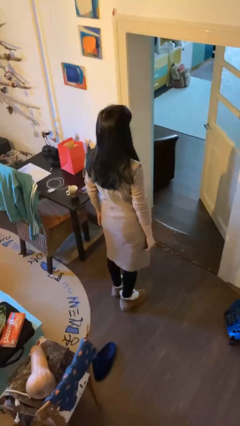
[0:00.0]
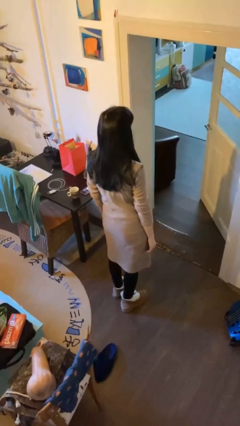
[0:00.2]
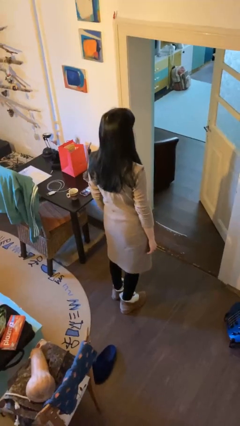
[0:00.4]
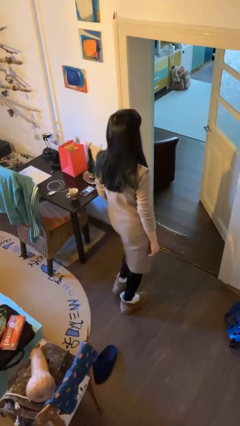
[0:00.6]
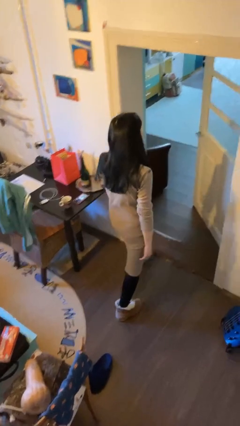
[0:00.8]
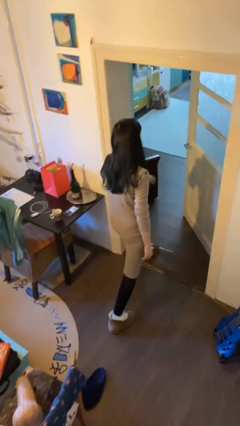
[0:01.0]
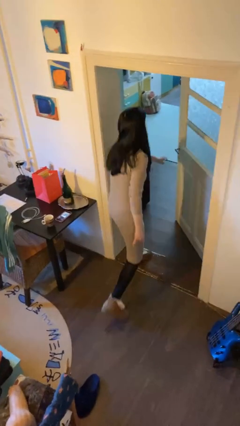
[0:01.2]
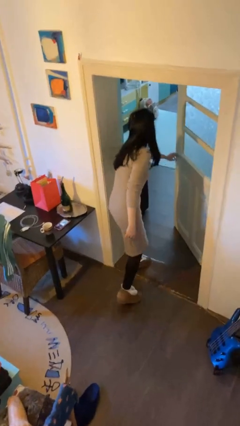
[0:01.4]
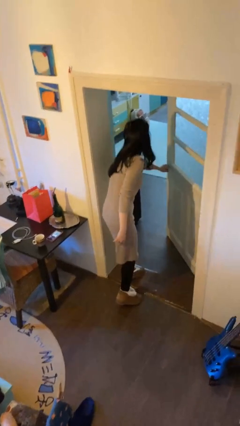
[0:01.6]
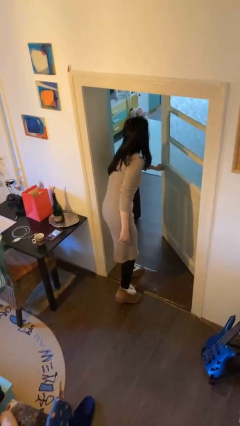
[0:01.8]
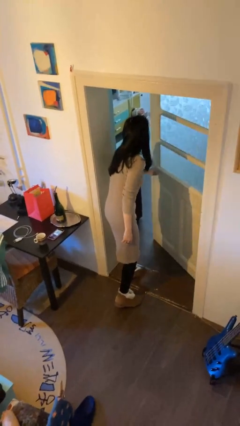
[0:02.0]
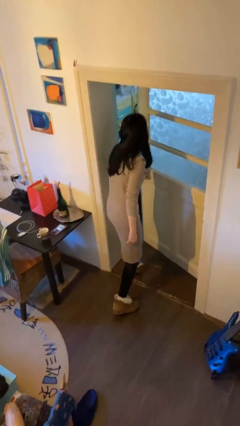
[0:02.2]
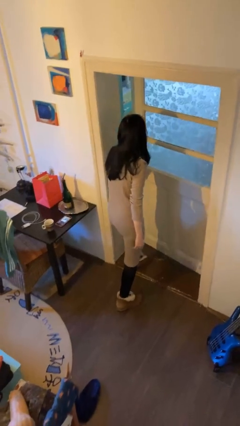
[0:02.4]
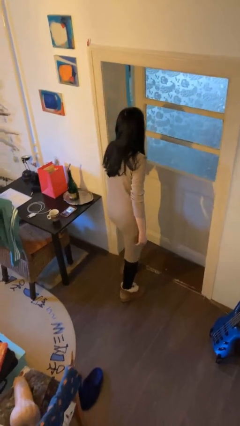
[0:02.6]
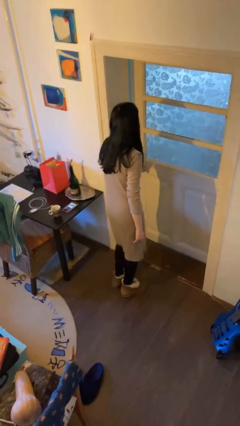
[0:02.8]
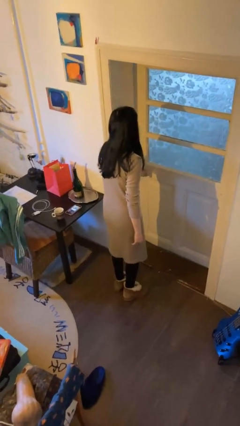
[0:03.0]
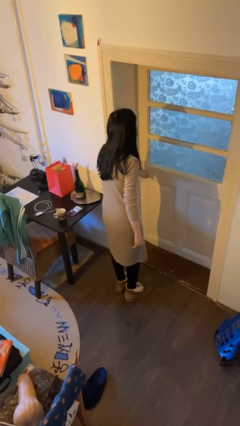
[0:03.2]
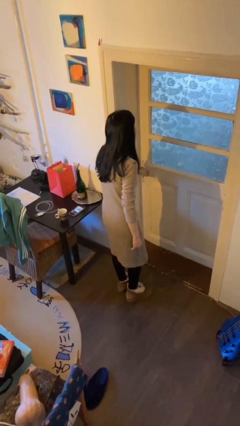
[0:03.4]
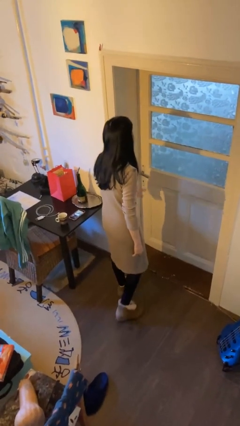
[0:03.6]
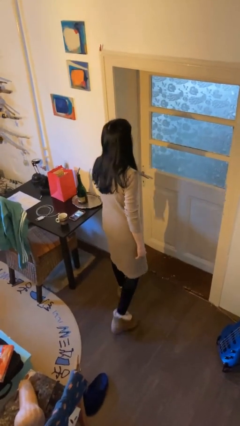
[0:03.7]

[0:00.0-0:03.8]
person closes facility door

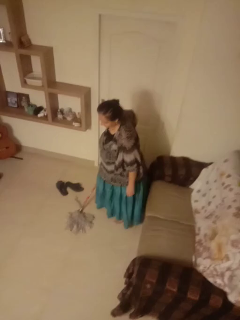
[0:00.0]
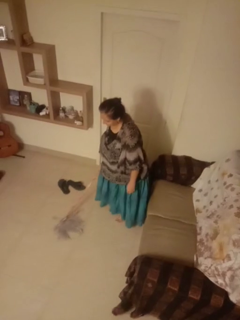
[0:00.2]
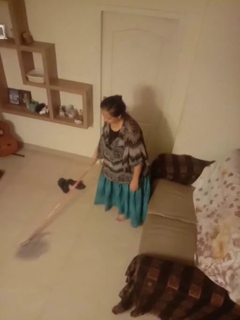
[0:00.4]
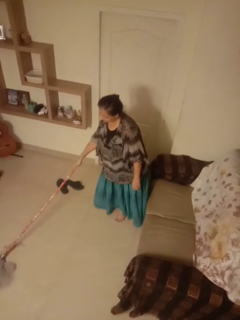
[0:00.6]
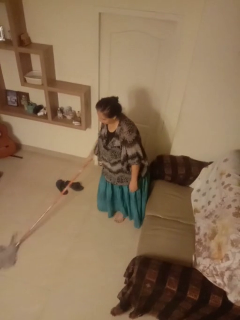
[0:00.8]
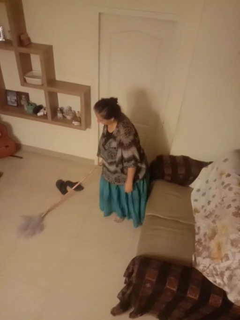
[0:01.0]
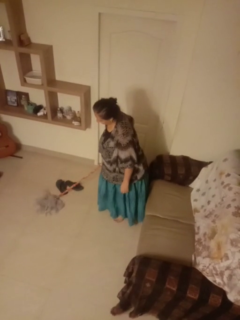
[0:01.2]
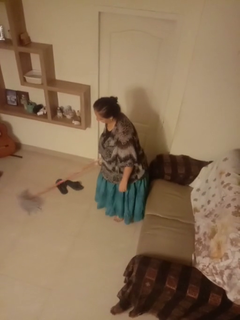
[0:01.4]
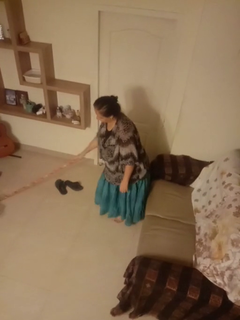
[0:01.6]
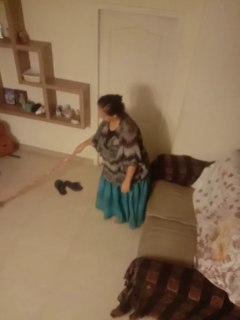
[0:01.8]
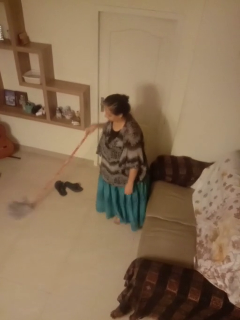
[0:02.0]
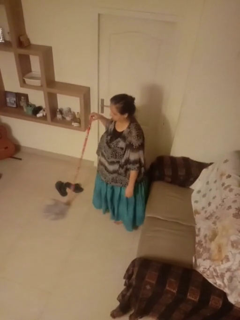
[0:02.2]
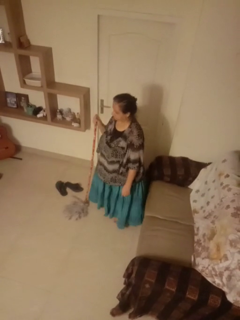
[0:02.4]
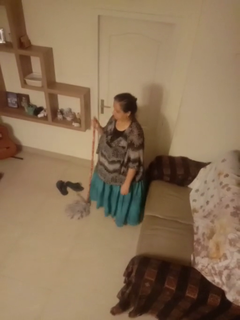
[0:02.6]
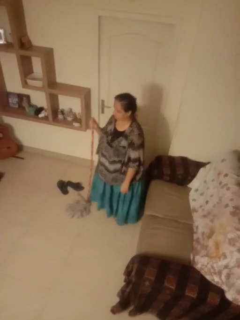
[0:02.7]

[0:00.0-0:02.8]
person mops

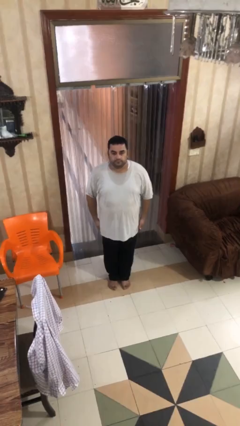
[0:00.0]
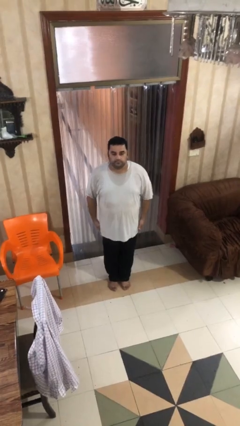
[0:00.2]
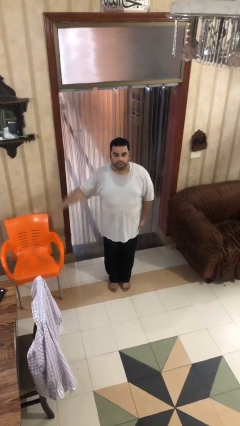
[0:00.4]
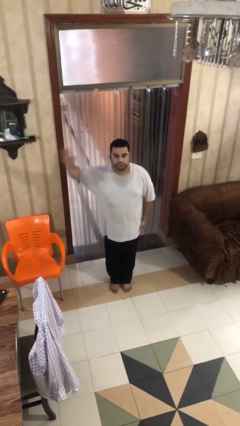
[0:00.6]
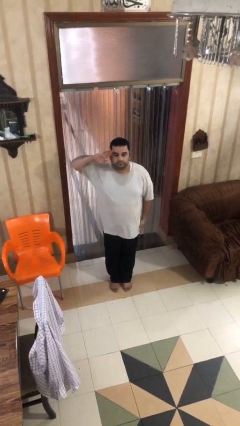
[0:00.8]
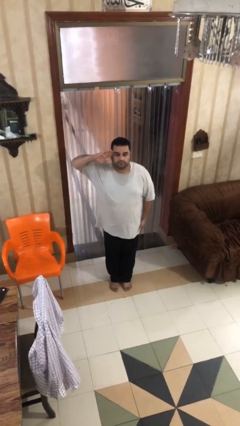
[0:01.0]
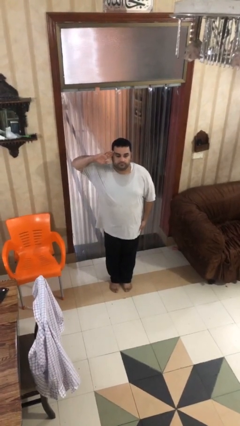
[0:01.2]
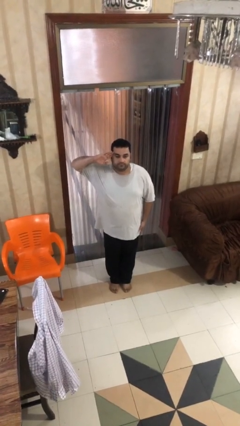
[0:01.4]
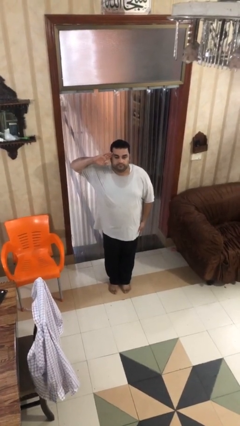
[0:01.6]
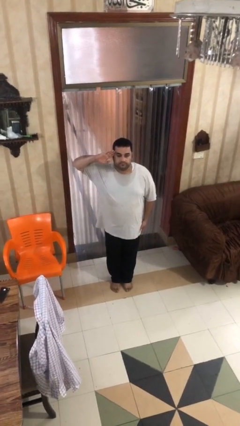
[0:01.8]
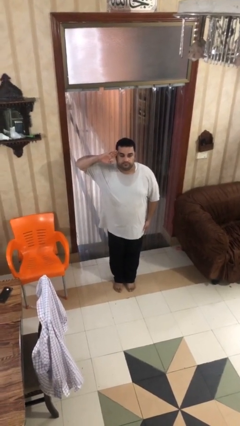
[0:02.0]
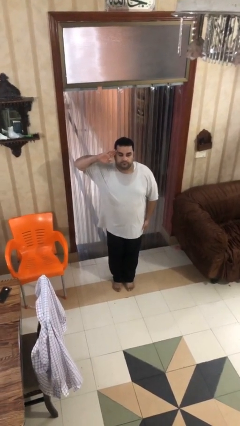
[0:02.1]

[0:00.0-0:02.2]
person salutes

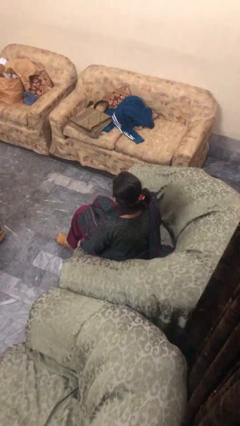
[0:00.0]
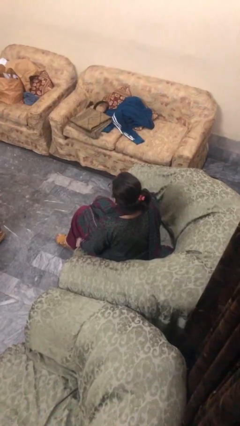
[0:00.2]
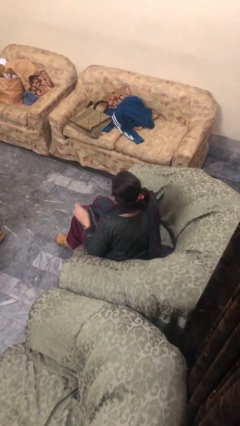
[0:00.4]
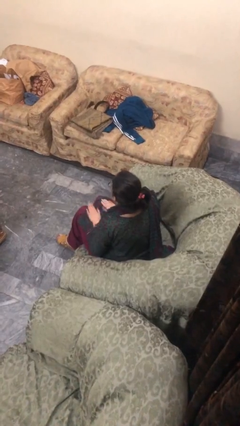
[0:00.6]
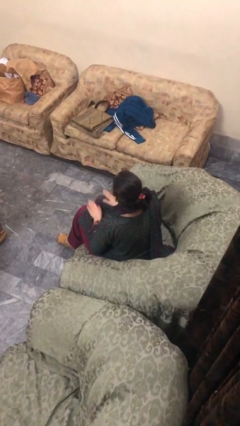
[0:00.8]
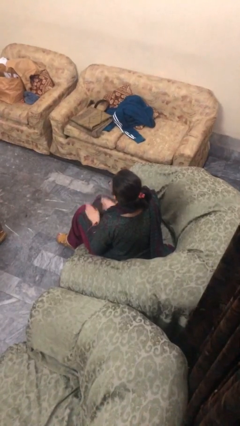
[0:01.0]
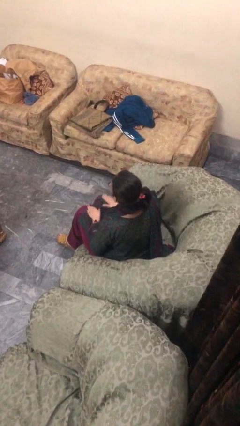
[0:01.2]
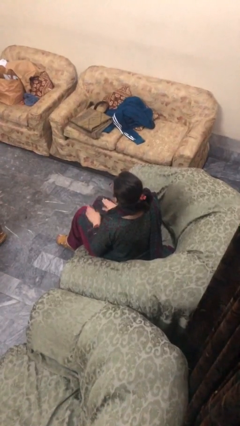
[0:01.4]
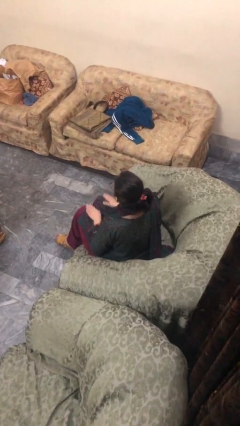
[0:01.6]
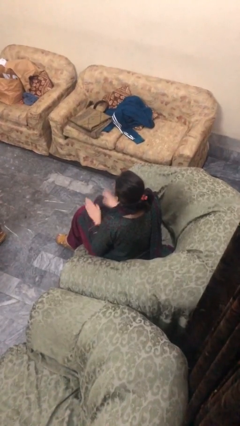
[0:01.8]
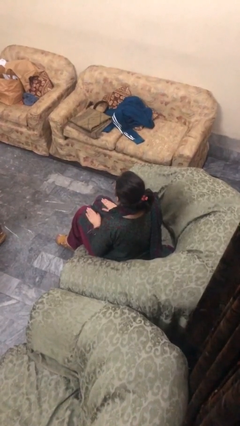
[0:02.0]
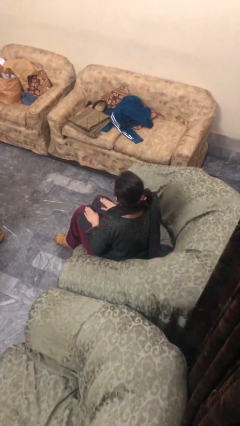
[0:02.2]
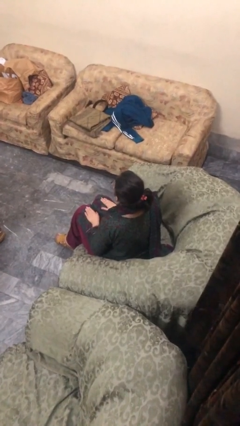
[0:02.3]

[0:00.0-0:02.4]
person slaps hands on thighs

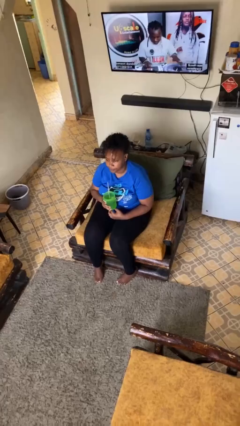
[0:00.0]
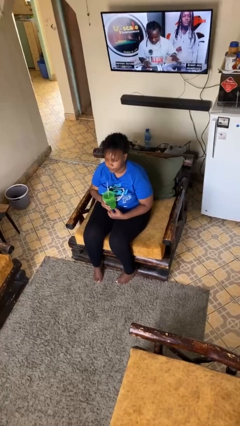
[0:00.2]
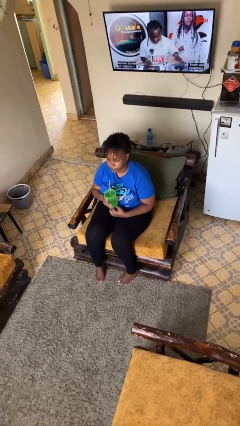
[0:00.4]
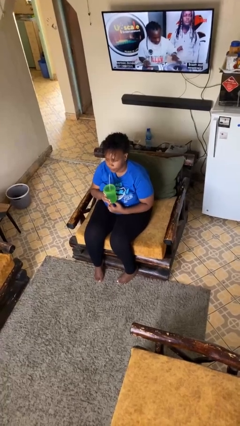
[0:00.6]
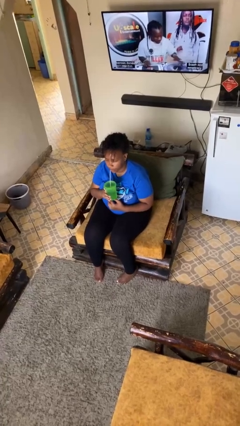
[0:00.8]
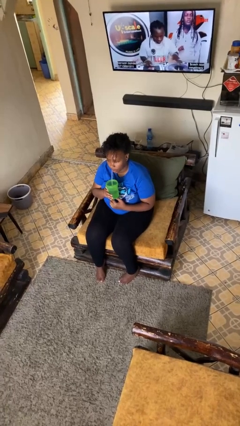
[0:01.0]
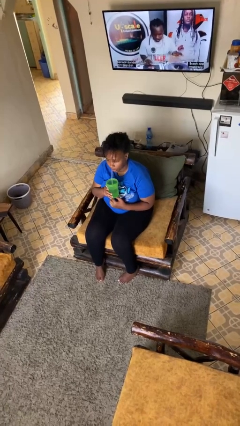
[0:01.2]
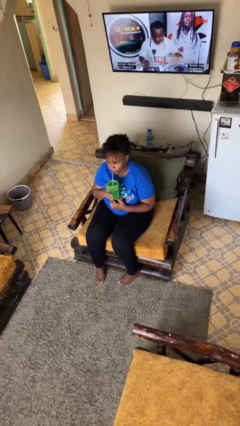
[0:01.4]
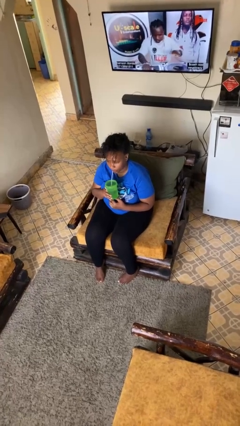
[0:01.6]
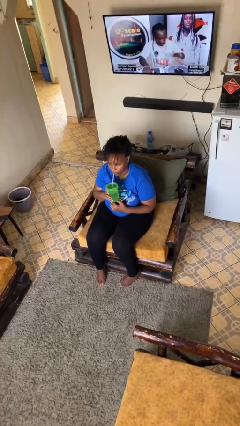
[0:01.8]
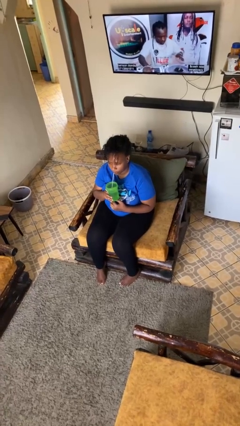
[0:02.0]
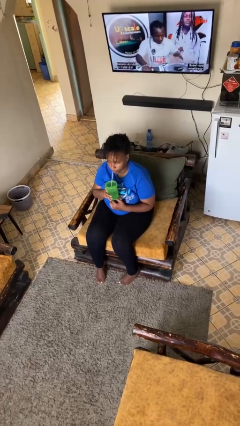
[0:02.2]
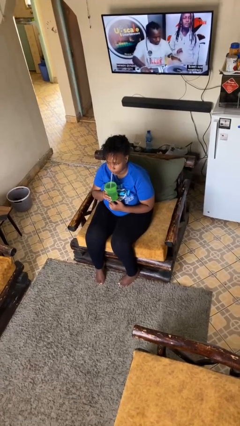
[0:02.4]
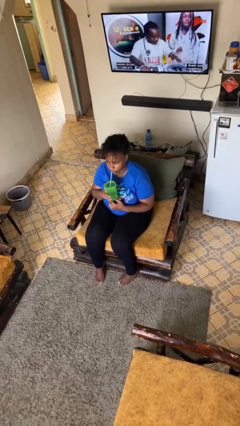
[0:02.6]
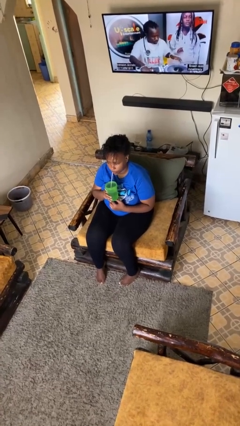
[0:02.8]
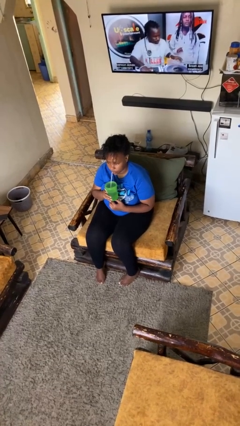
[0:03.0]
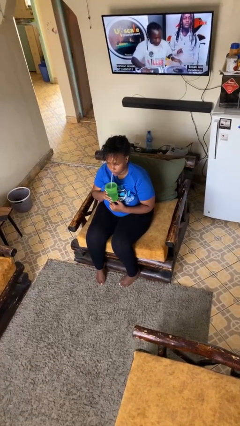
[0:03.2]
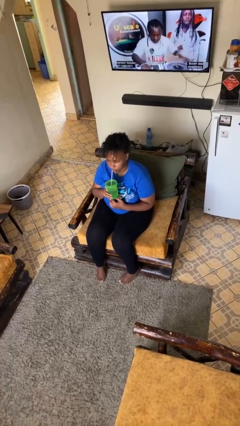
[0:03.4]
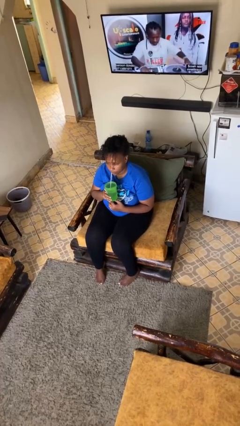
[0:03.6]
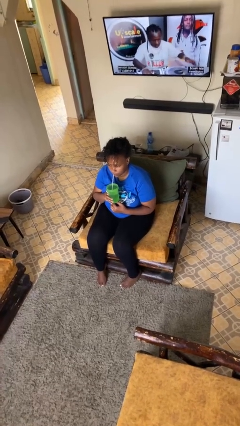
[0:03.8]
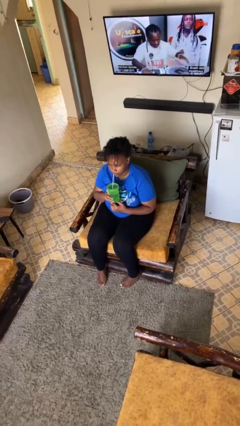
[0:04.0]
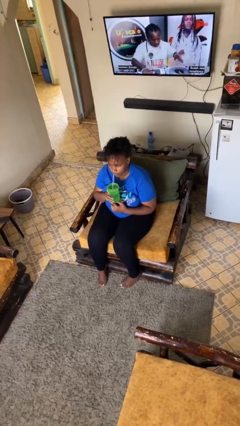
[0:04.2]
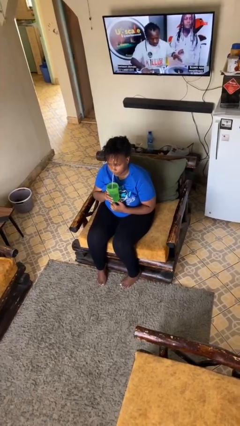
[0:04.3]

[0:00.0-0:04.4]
person drinks from straw

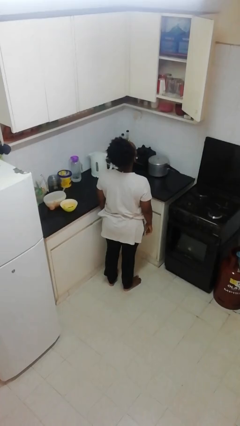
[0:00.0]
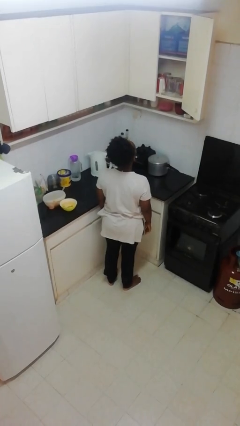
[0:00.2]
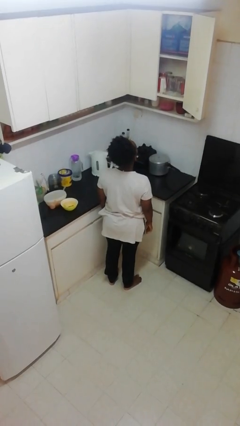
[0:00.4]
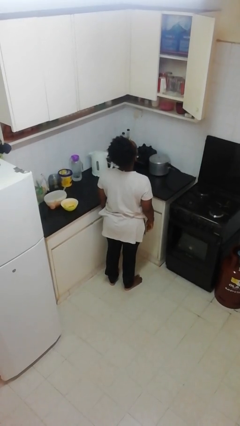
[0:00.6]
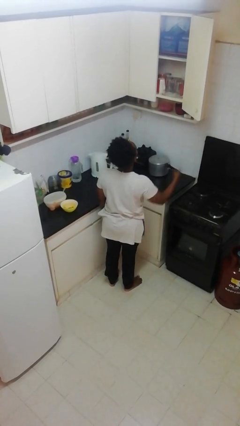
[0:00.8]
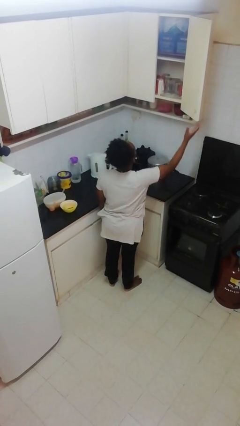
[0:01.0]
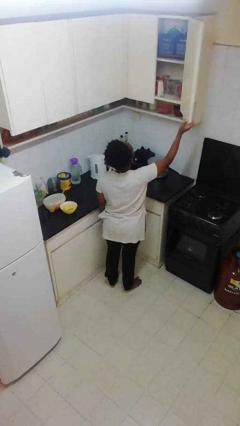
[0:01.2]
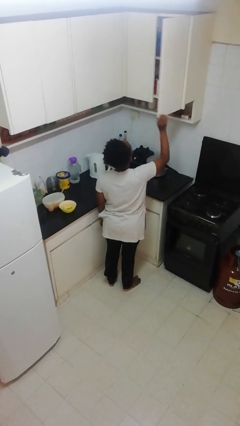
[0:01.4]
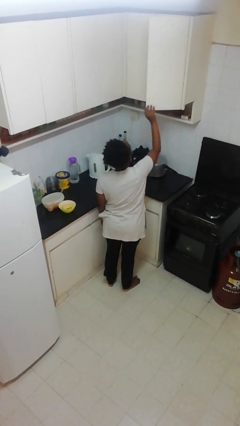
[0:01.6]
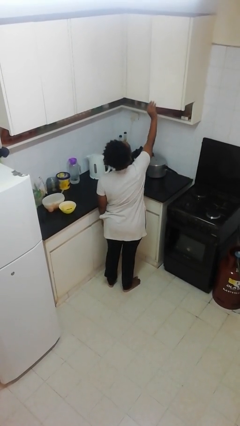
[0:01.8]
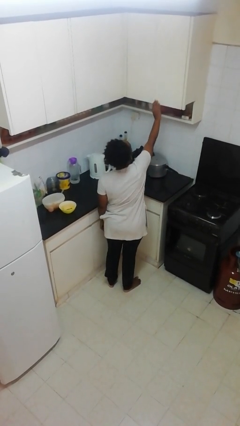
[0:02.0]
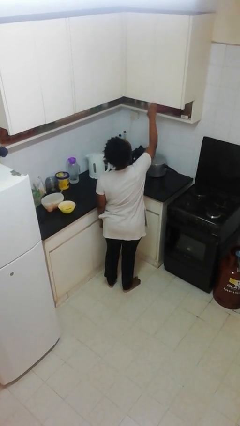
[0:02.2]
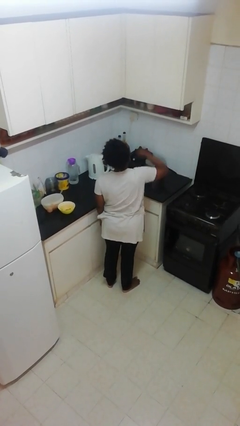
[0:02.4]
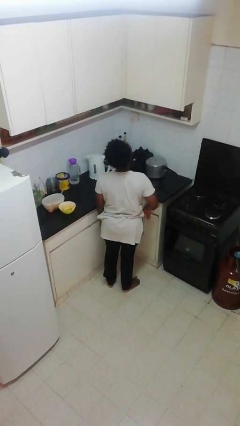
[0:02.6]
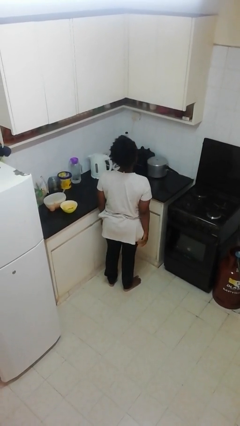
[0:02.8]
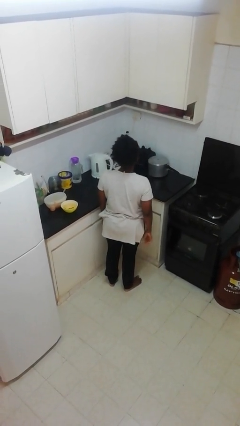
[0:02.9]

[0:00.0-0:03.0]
person closes cabinet
